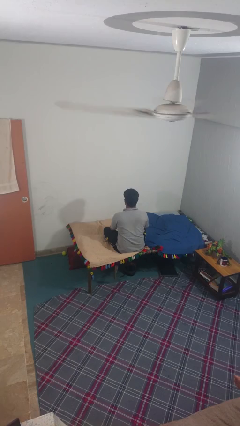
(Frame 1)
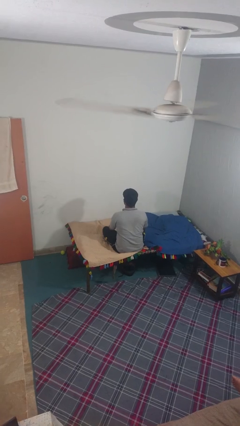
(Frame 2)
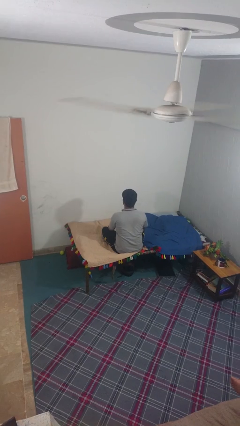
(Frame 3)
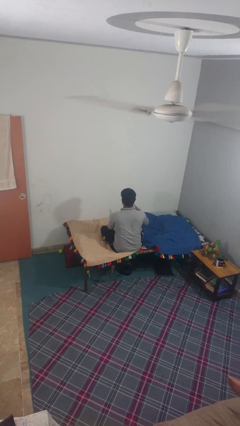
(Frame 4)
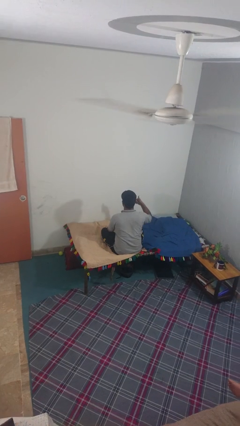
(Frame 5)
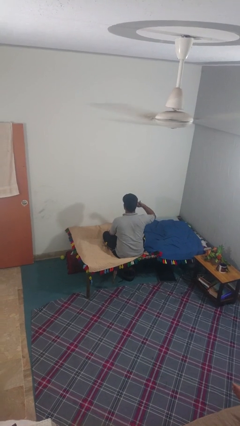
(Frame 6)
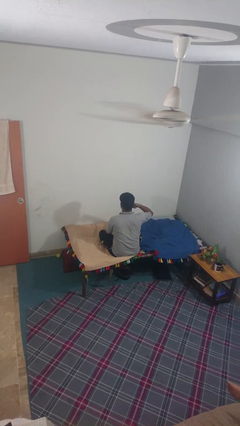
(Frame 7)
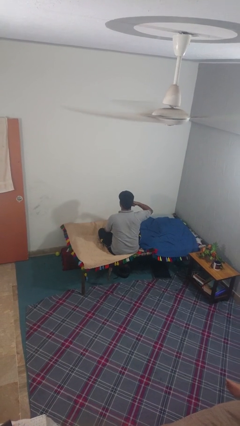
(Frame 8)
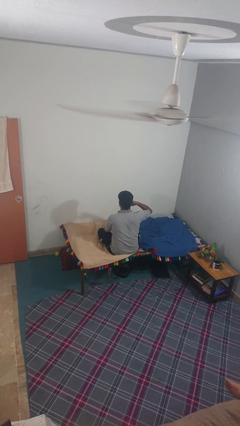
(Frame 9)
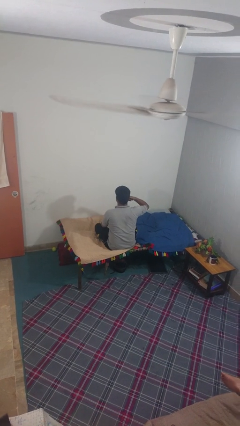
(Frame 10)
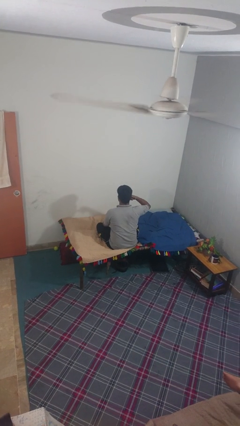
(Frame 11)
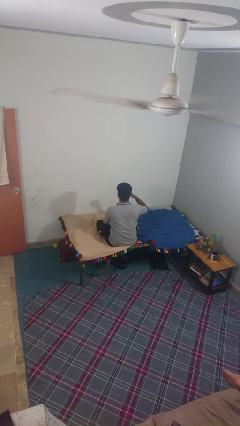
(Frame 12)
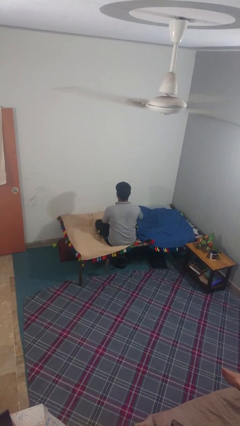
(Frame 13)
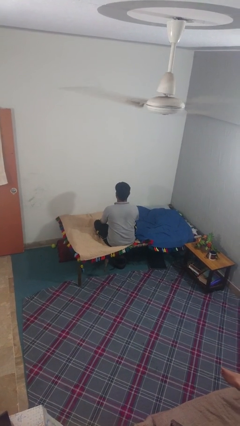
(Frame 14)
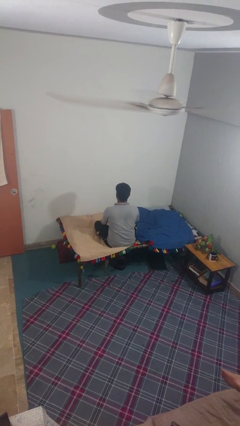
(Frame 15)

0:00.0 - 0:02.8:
person gestures call me

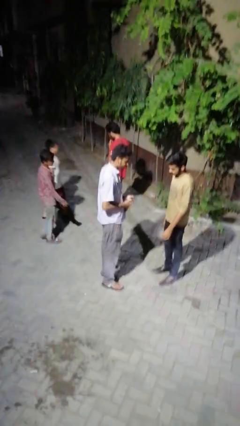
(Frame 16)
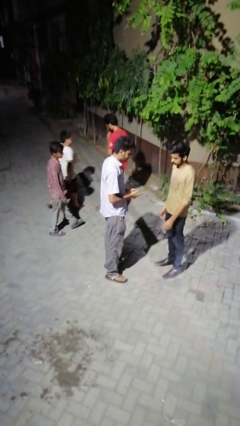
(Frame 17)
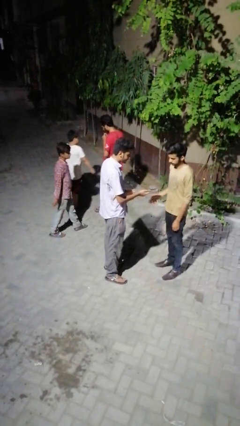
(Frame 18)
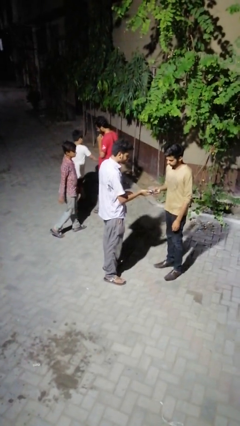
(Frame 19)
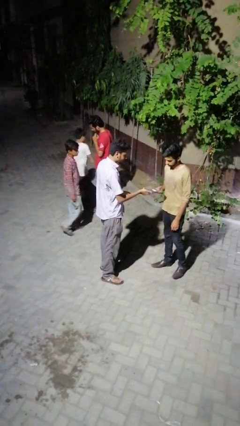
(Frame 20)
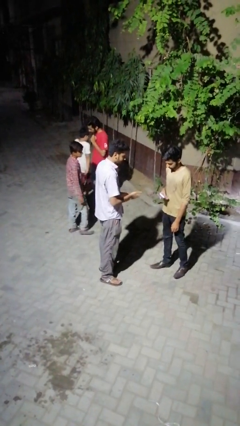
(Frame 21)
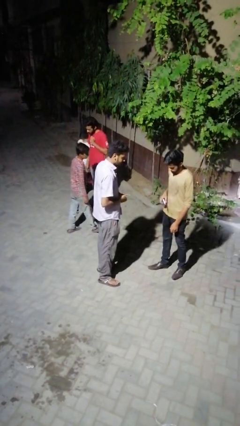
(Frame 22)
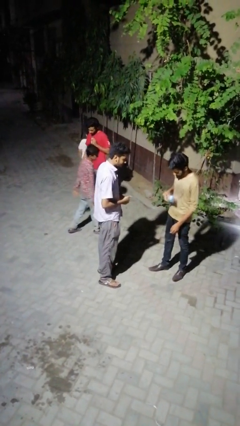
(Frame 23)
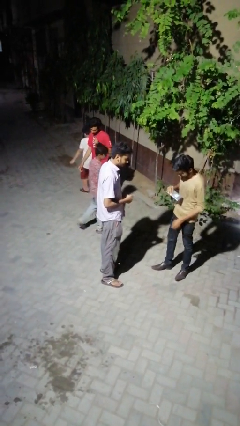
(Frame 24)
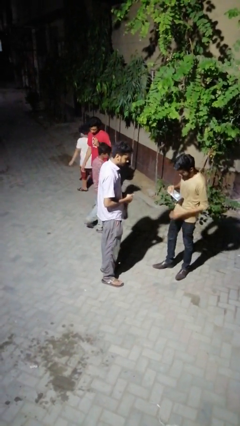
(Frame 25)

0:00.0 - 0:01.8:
person transfers object to person

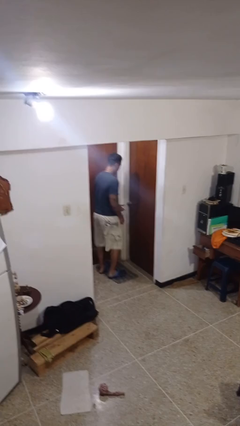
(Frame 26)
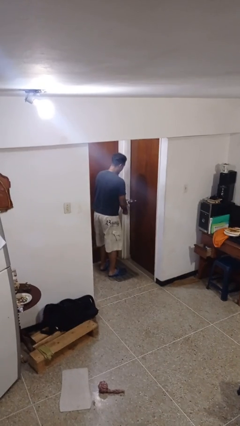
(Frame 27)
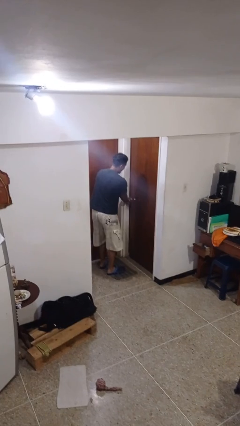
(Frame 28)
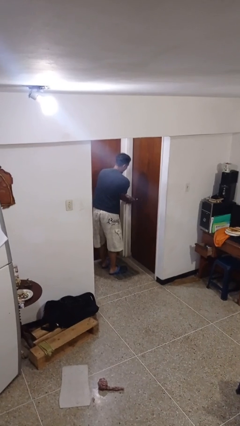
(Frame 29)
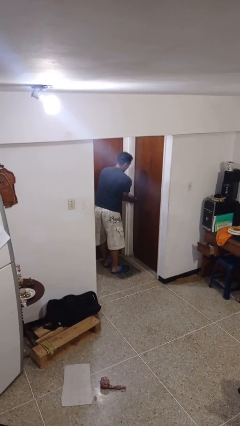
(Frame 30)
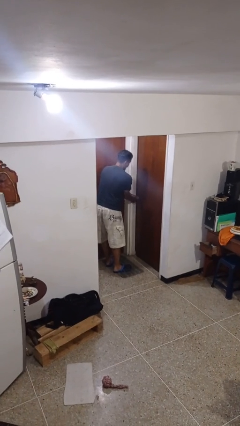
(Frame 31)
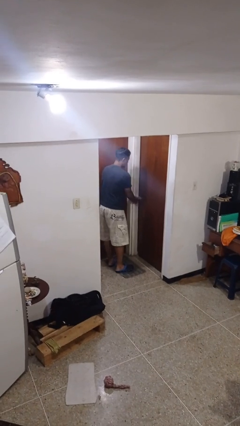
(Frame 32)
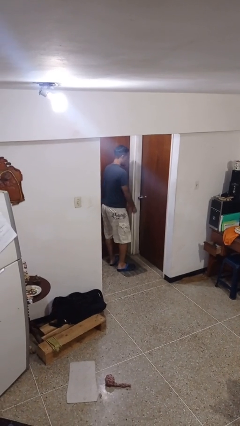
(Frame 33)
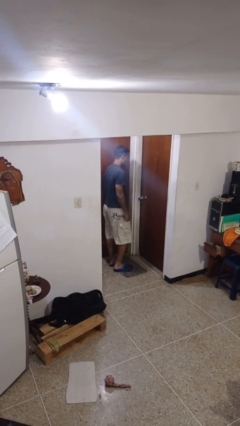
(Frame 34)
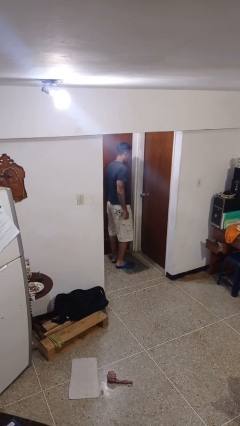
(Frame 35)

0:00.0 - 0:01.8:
person locks door with keys

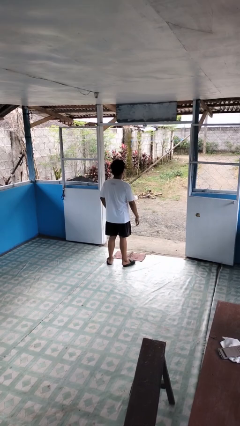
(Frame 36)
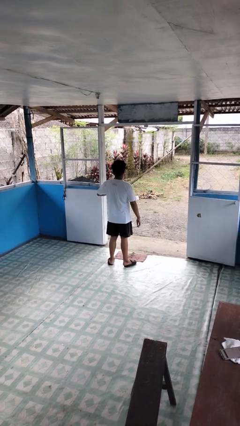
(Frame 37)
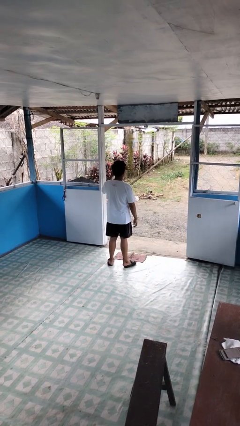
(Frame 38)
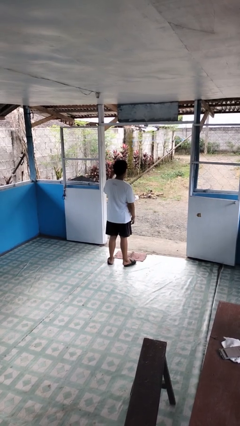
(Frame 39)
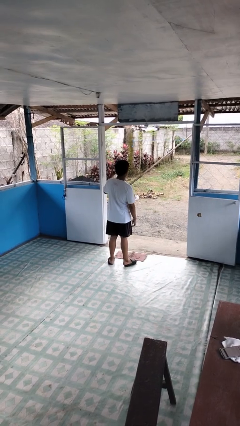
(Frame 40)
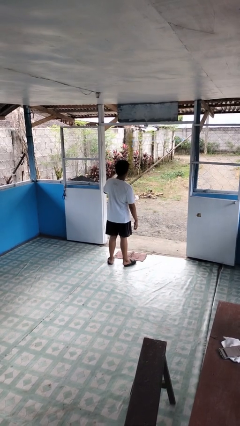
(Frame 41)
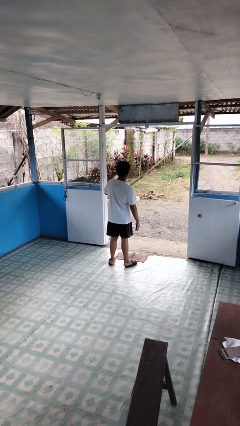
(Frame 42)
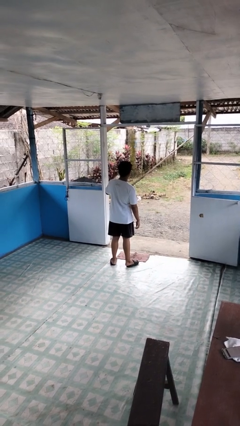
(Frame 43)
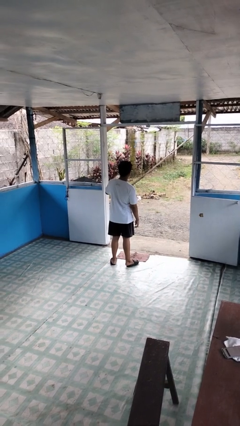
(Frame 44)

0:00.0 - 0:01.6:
person gestures number one

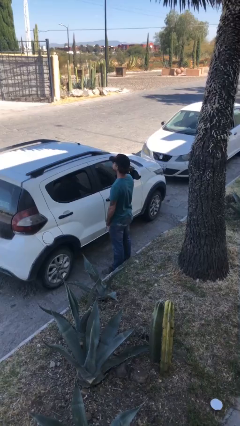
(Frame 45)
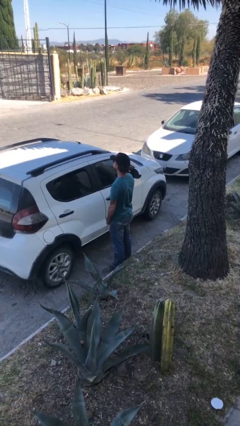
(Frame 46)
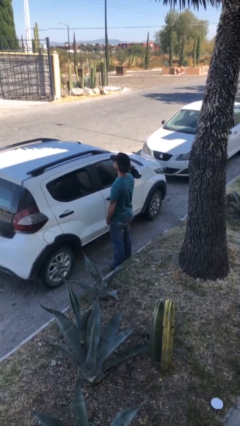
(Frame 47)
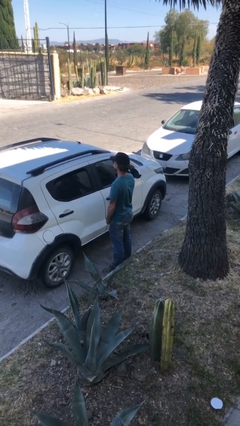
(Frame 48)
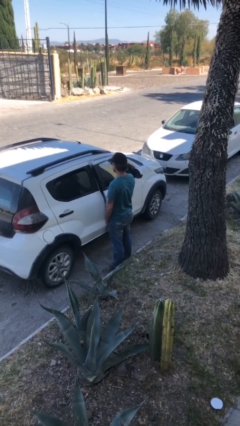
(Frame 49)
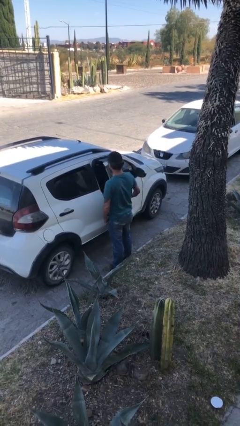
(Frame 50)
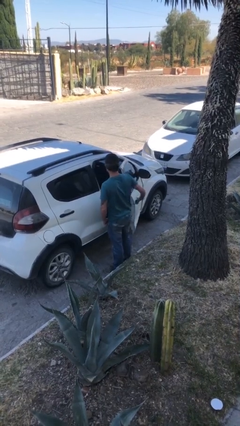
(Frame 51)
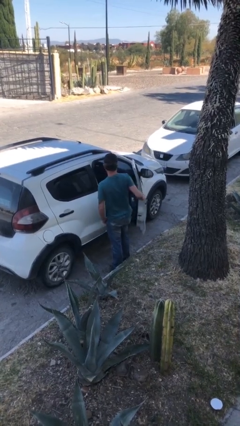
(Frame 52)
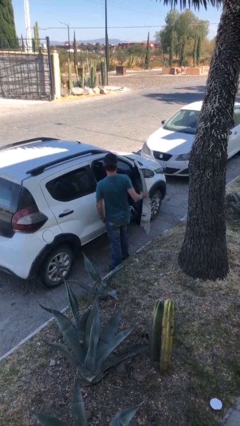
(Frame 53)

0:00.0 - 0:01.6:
person opens car door

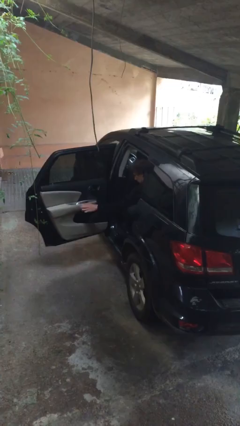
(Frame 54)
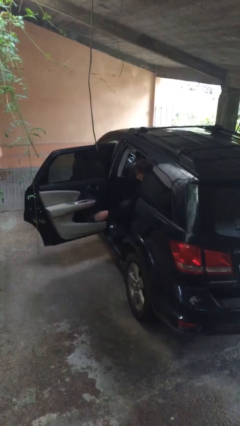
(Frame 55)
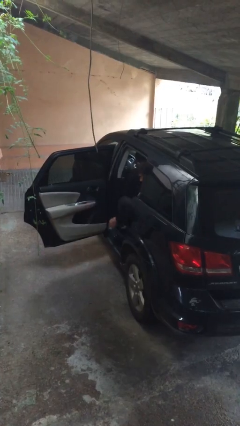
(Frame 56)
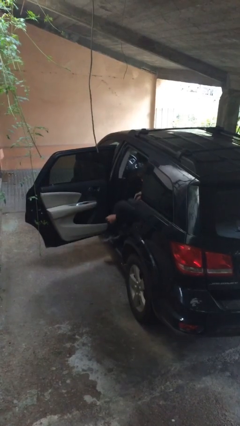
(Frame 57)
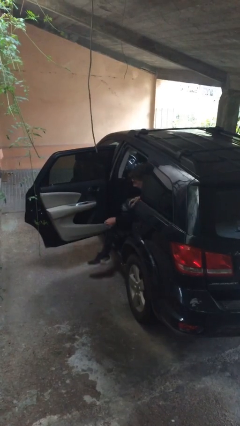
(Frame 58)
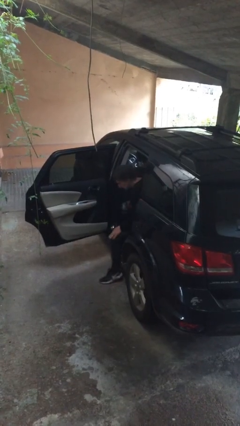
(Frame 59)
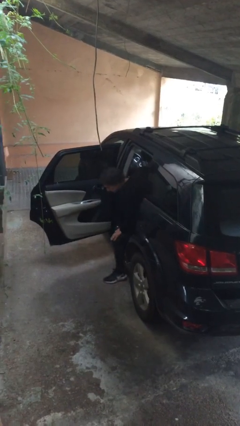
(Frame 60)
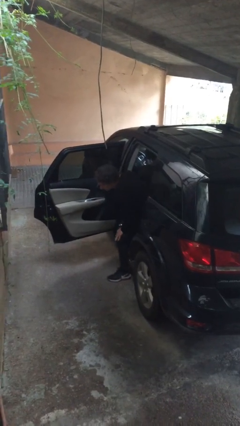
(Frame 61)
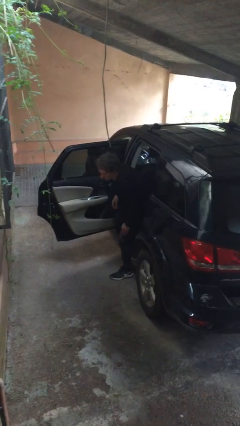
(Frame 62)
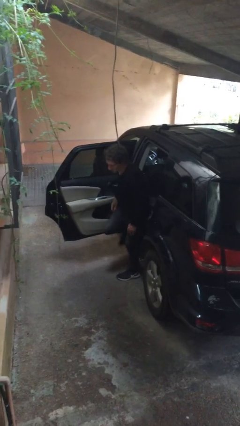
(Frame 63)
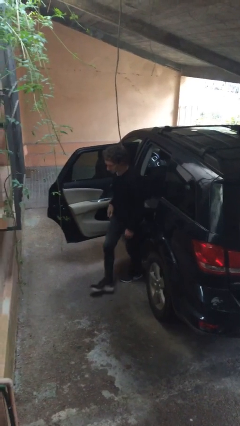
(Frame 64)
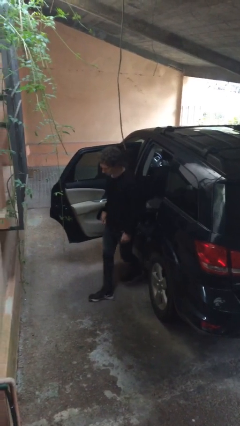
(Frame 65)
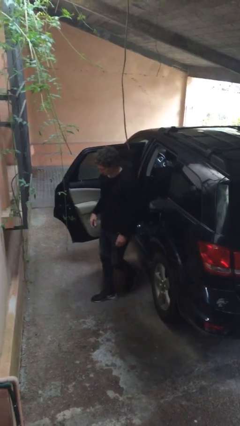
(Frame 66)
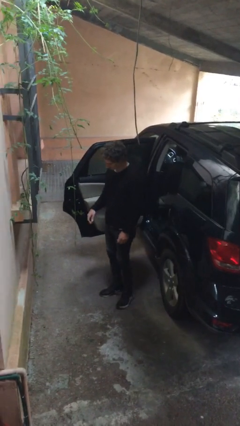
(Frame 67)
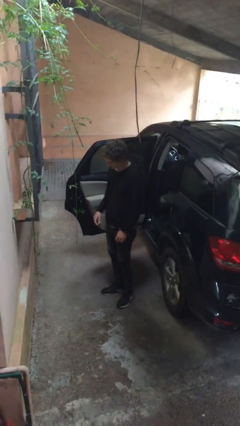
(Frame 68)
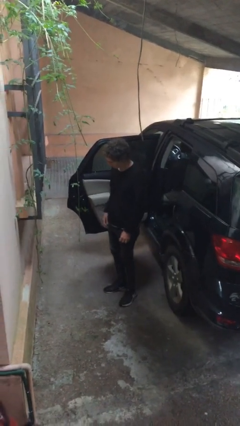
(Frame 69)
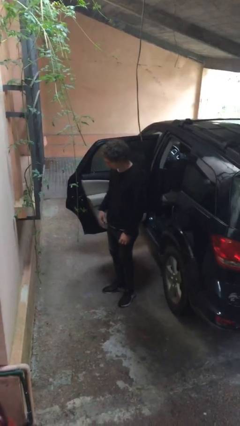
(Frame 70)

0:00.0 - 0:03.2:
person exits car

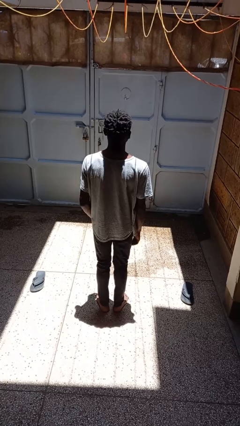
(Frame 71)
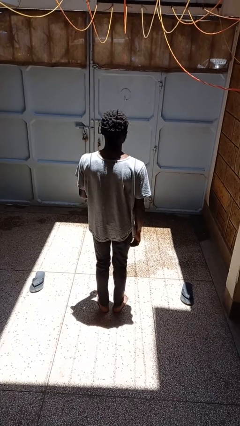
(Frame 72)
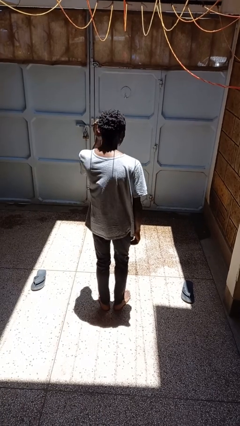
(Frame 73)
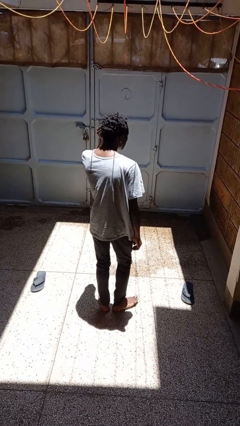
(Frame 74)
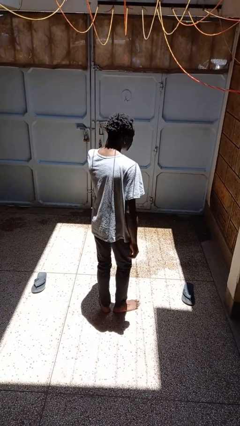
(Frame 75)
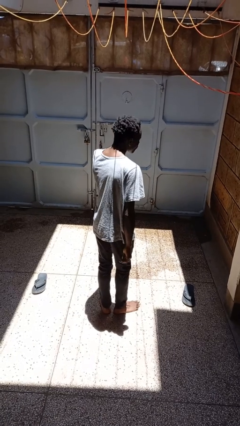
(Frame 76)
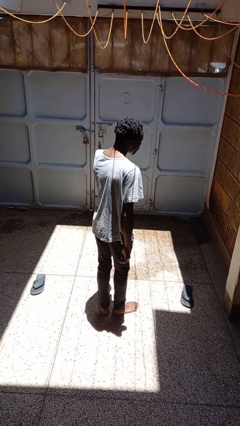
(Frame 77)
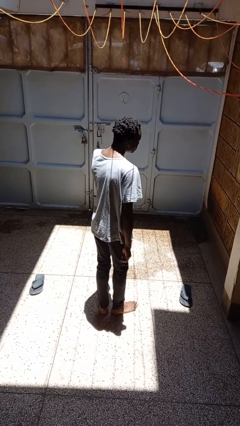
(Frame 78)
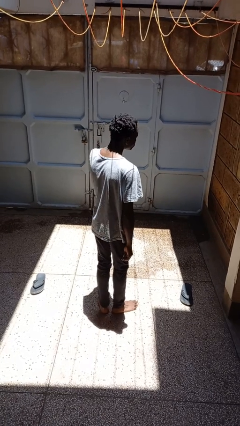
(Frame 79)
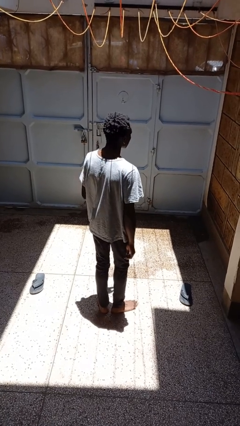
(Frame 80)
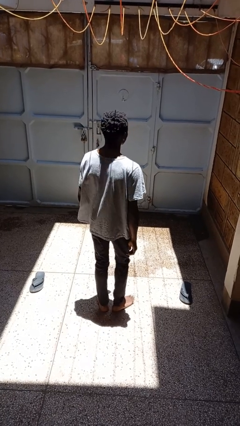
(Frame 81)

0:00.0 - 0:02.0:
person touches earlobe

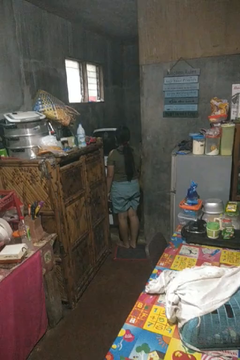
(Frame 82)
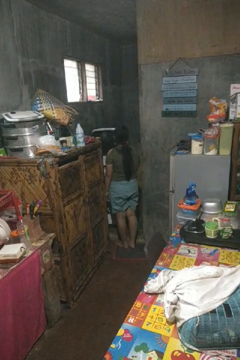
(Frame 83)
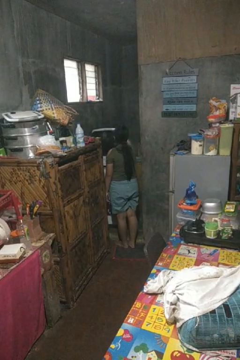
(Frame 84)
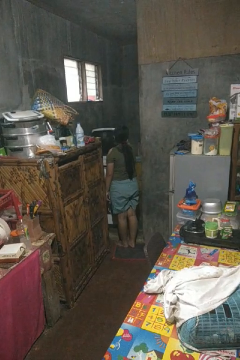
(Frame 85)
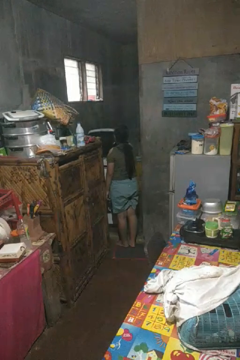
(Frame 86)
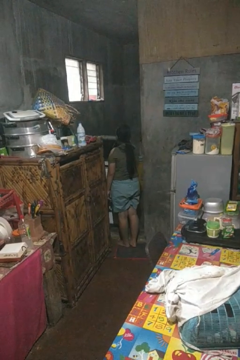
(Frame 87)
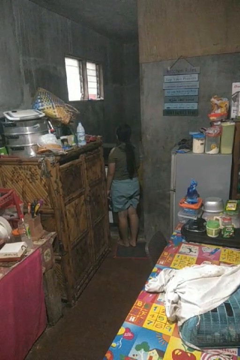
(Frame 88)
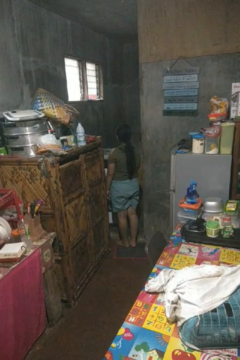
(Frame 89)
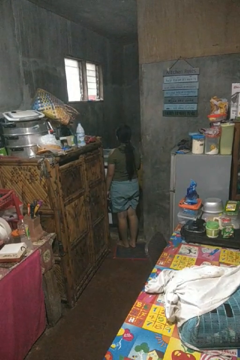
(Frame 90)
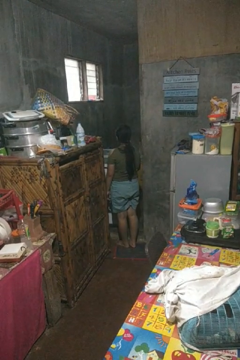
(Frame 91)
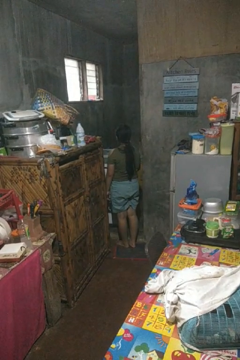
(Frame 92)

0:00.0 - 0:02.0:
person closes clothes washer

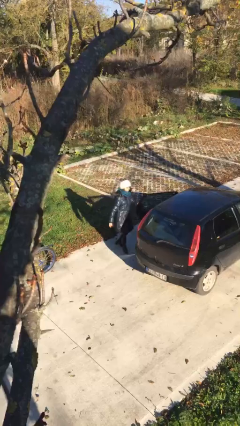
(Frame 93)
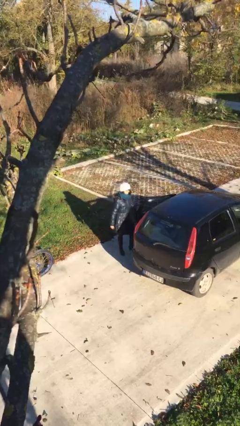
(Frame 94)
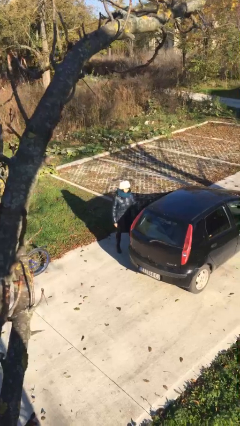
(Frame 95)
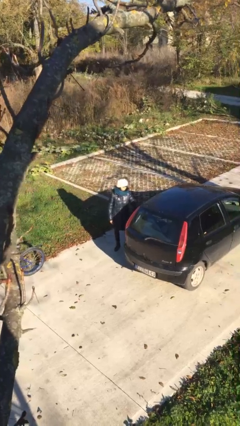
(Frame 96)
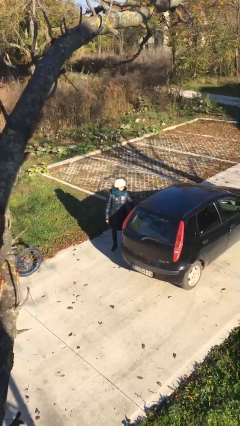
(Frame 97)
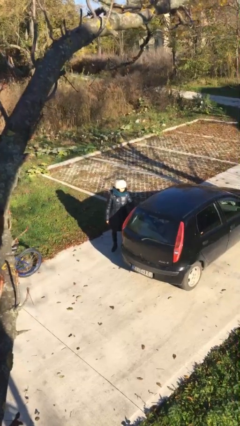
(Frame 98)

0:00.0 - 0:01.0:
person closes car door
